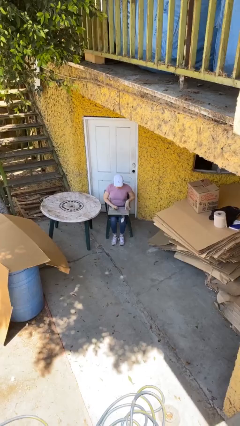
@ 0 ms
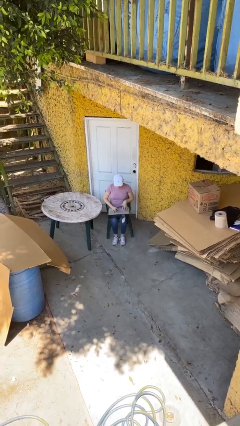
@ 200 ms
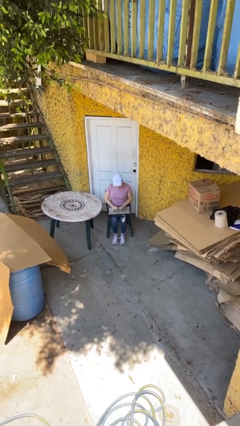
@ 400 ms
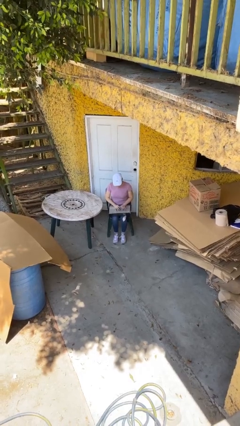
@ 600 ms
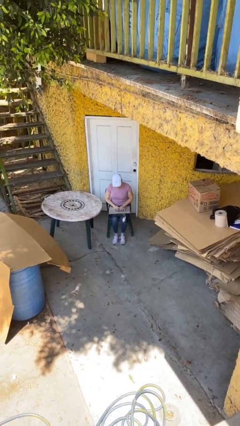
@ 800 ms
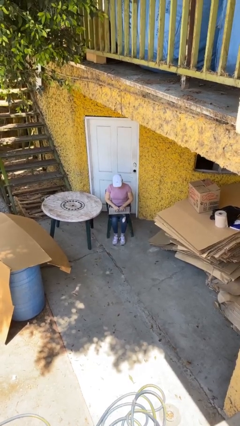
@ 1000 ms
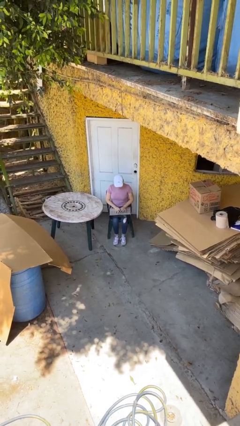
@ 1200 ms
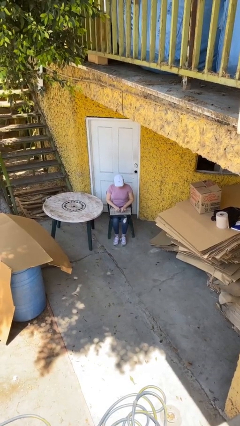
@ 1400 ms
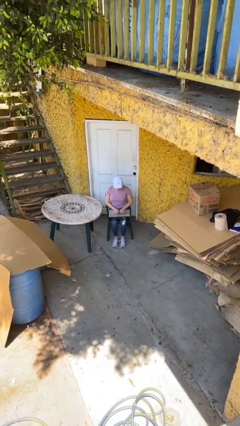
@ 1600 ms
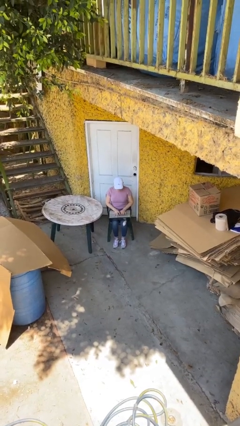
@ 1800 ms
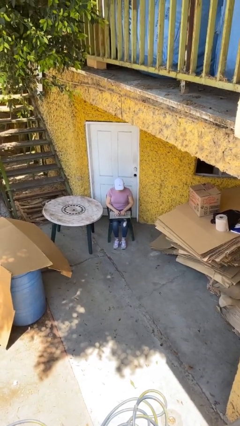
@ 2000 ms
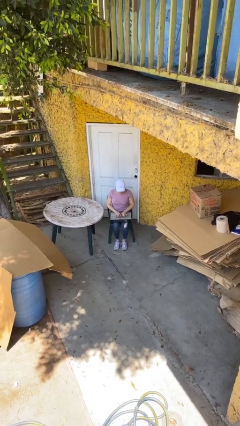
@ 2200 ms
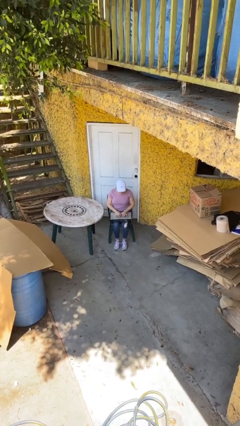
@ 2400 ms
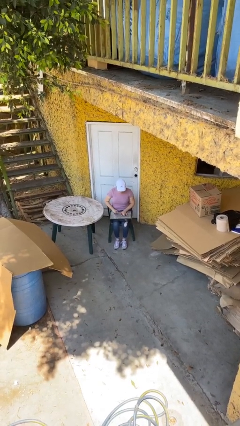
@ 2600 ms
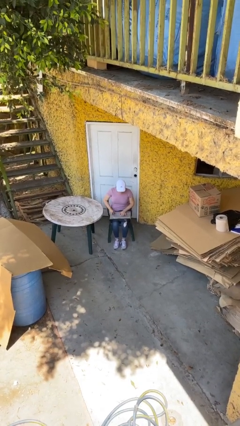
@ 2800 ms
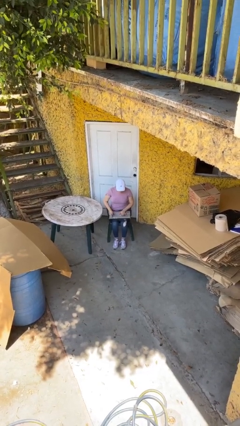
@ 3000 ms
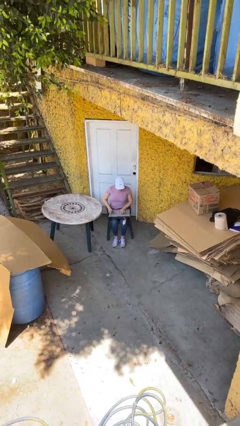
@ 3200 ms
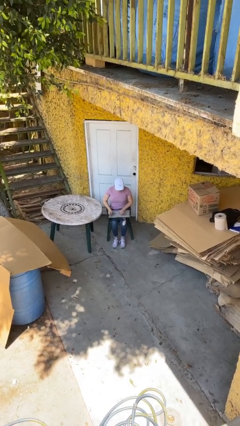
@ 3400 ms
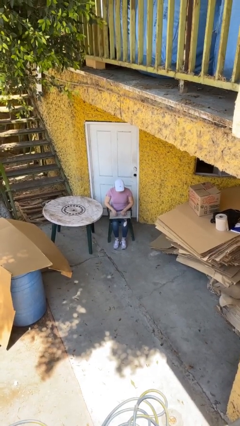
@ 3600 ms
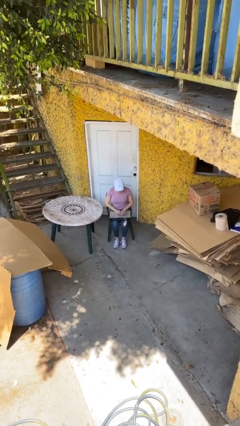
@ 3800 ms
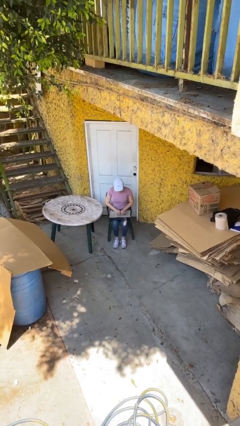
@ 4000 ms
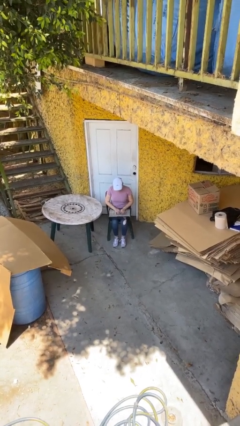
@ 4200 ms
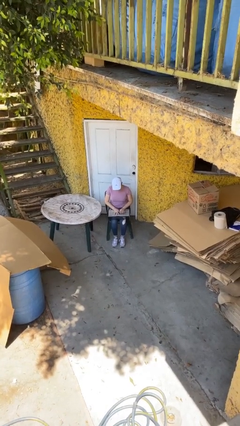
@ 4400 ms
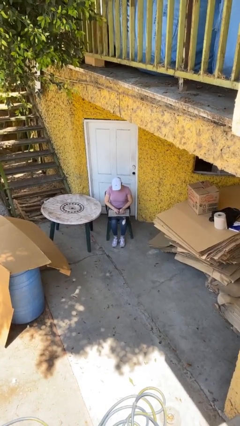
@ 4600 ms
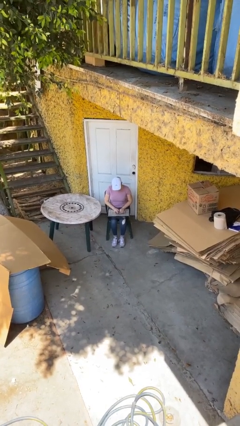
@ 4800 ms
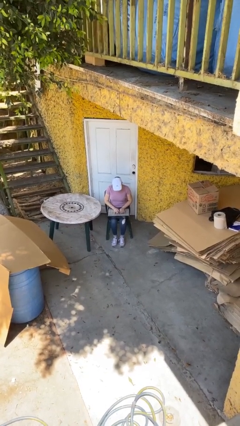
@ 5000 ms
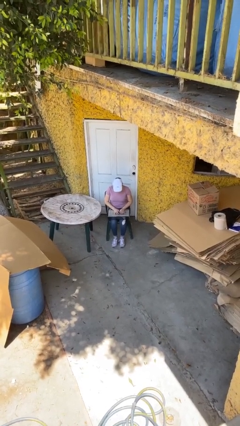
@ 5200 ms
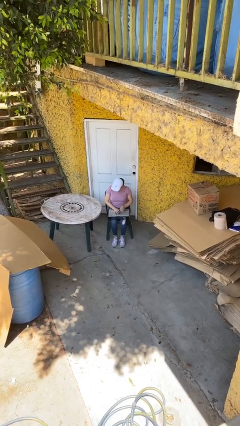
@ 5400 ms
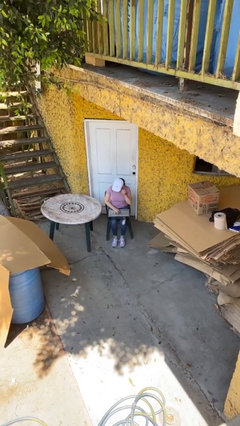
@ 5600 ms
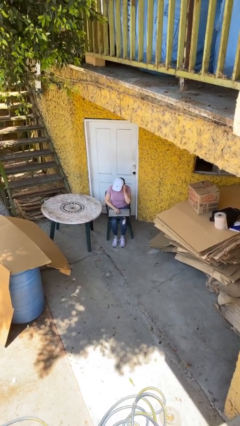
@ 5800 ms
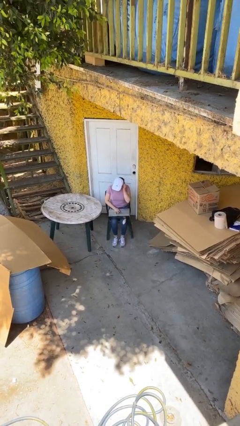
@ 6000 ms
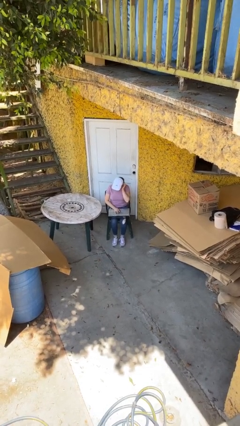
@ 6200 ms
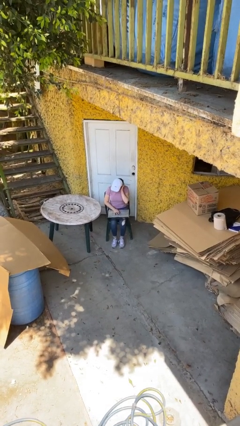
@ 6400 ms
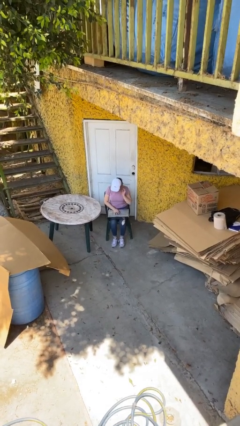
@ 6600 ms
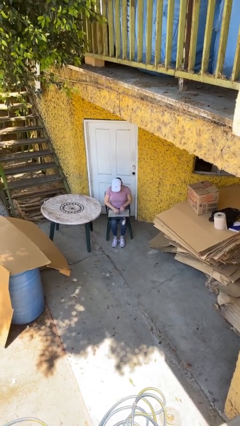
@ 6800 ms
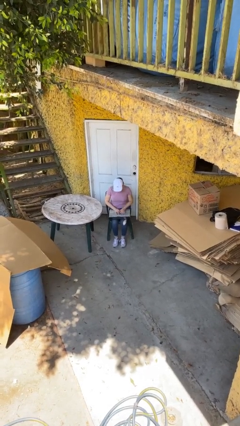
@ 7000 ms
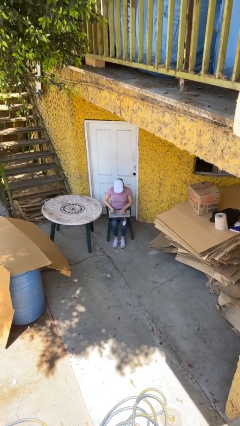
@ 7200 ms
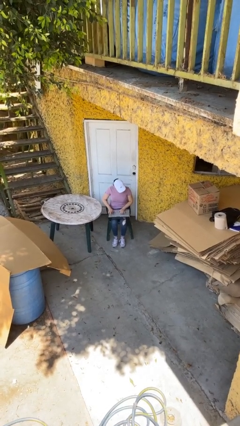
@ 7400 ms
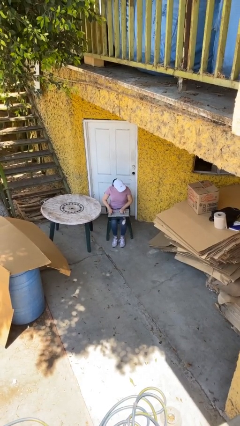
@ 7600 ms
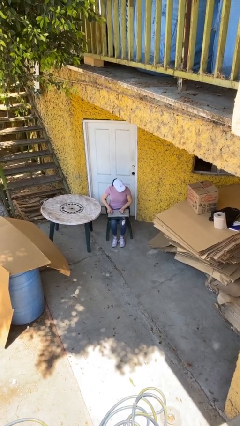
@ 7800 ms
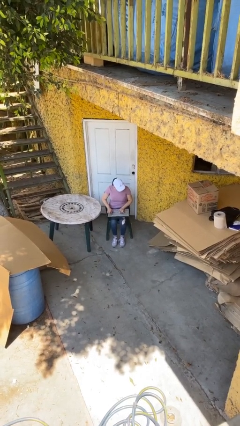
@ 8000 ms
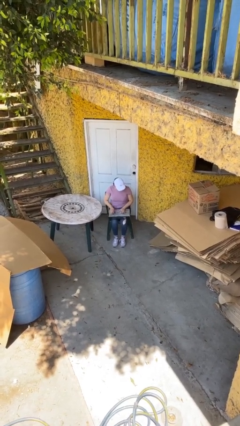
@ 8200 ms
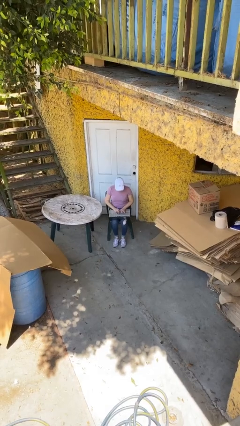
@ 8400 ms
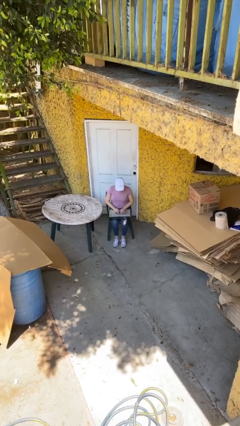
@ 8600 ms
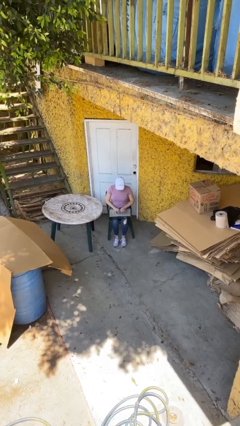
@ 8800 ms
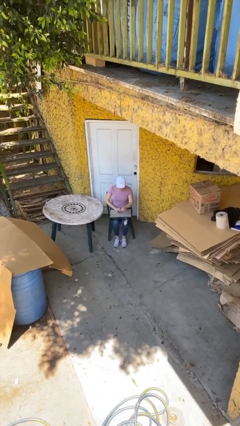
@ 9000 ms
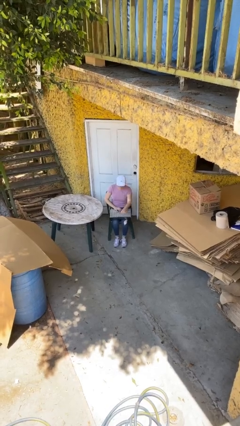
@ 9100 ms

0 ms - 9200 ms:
person interacts with laptop

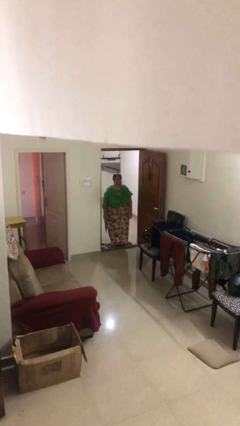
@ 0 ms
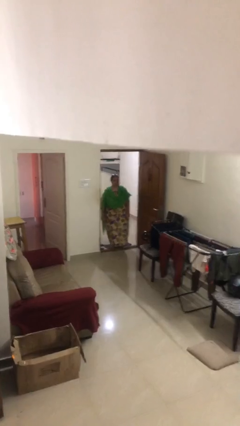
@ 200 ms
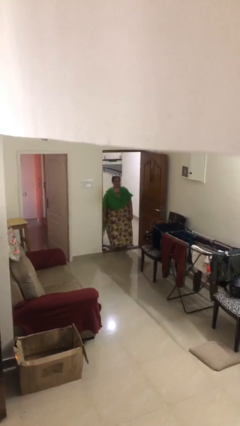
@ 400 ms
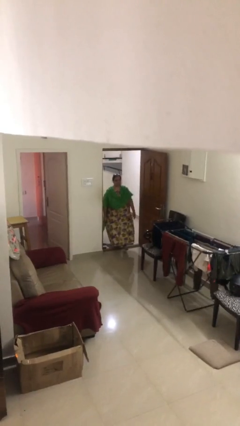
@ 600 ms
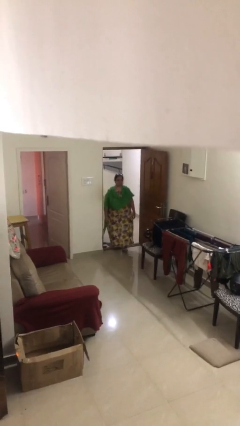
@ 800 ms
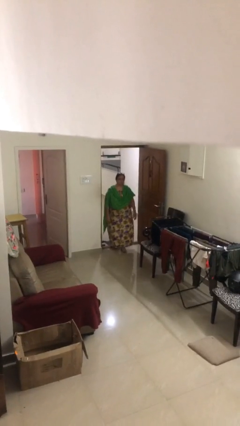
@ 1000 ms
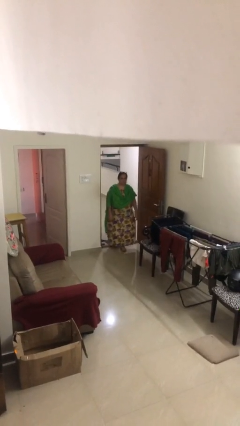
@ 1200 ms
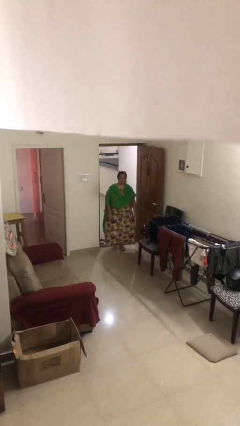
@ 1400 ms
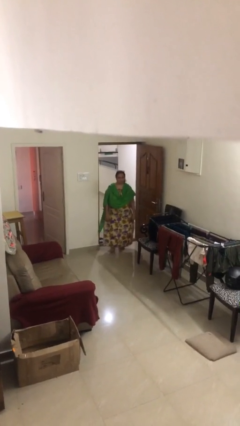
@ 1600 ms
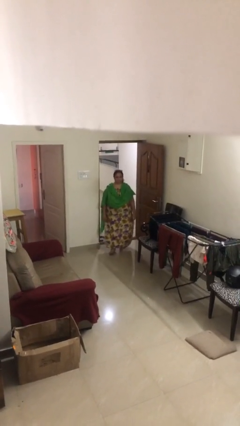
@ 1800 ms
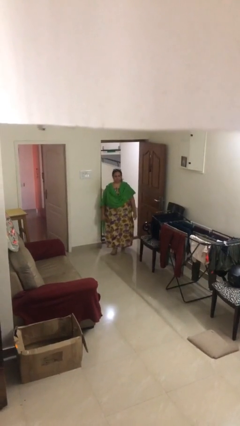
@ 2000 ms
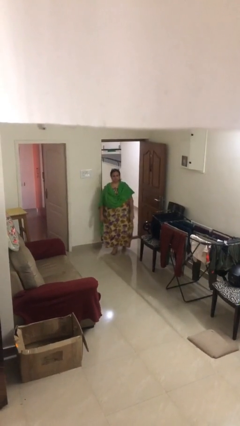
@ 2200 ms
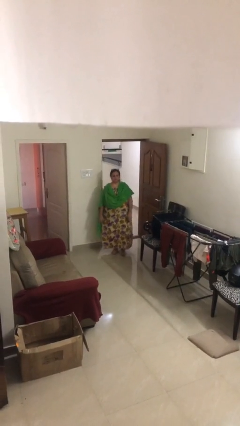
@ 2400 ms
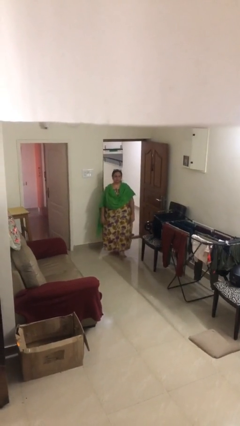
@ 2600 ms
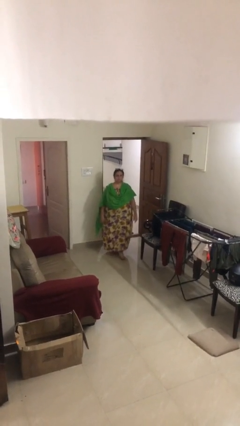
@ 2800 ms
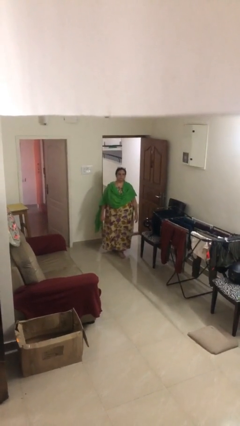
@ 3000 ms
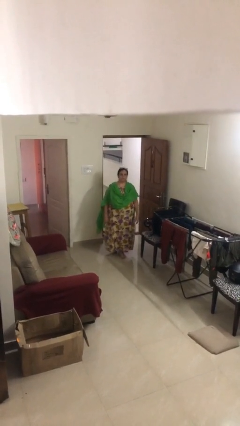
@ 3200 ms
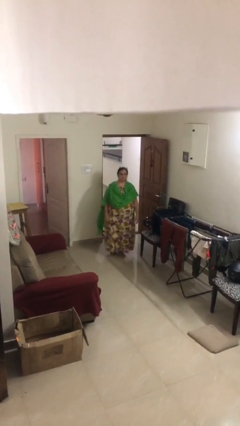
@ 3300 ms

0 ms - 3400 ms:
person enters scene through structure

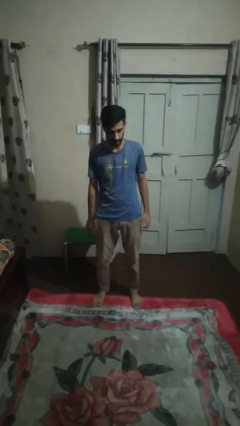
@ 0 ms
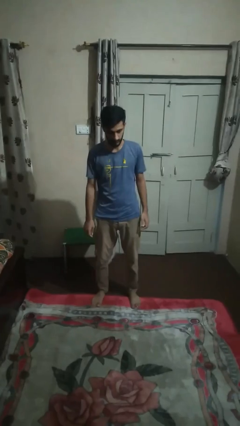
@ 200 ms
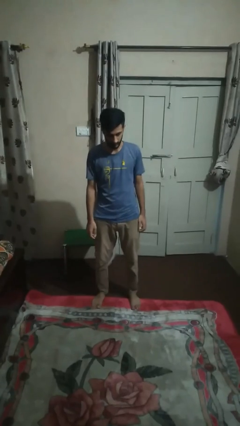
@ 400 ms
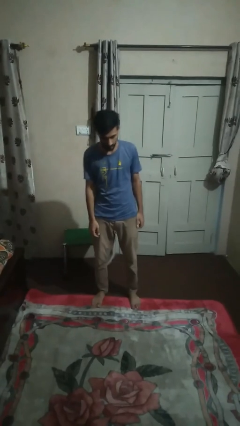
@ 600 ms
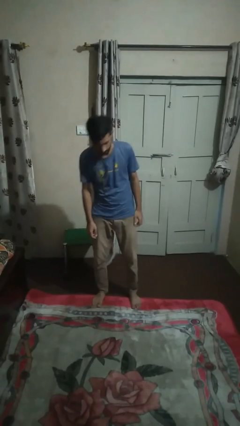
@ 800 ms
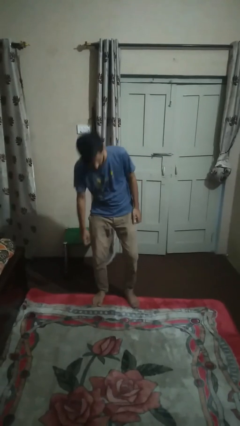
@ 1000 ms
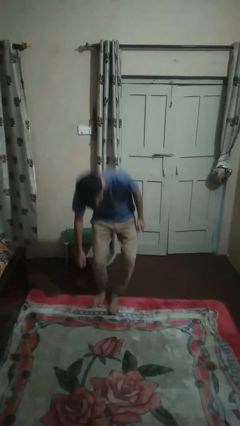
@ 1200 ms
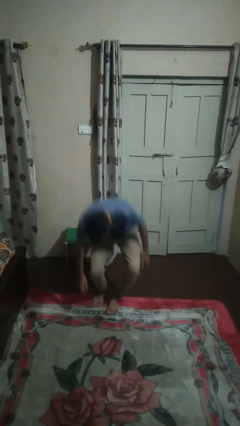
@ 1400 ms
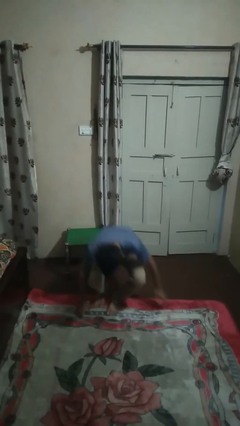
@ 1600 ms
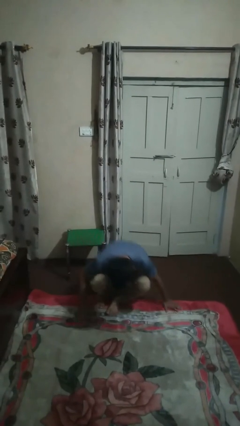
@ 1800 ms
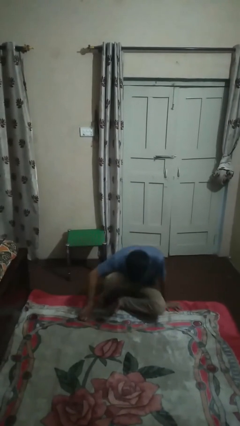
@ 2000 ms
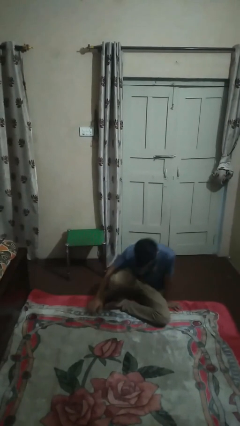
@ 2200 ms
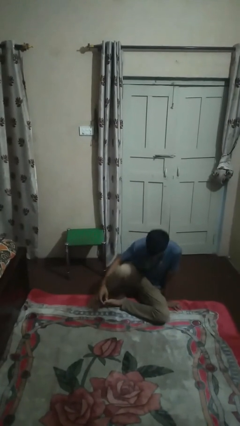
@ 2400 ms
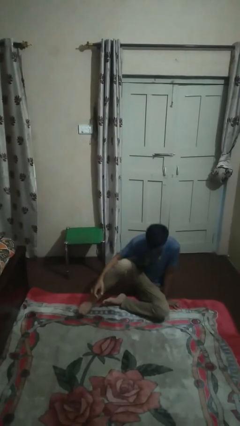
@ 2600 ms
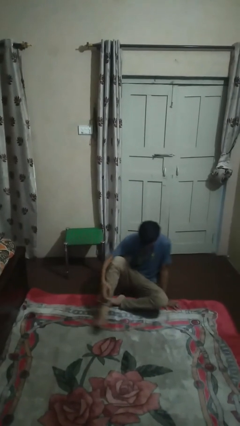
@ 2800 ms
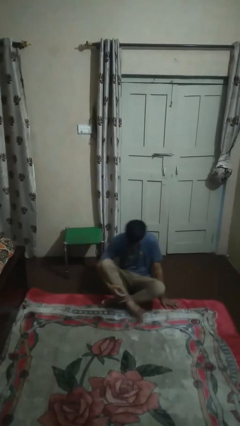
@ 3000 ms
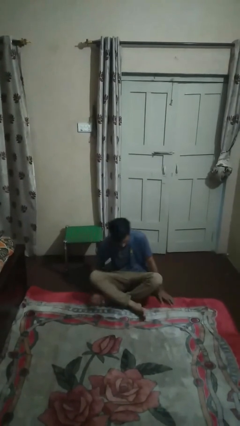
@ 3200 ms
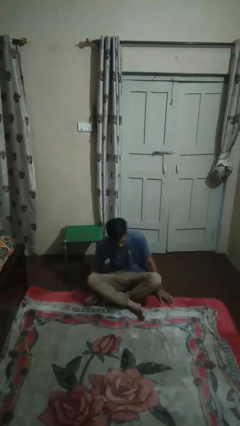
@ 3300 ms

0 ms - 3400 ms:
person sits crisscross

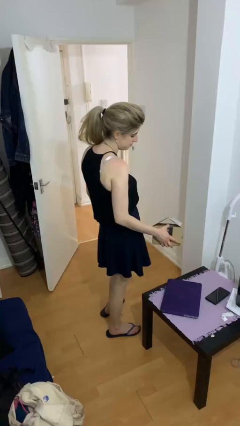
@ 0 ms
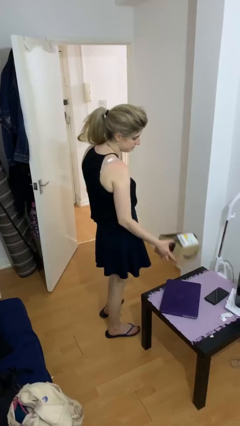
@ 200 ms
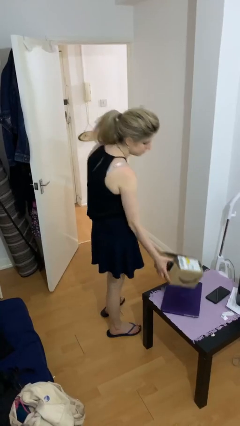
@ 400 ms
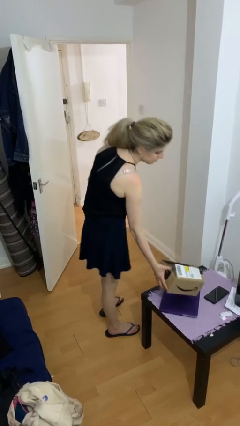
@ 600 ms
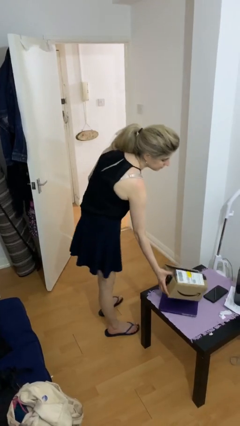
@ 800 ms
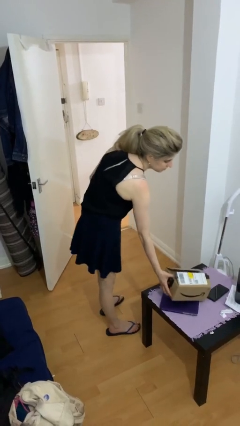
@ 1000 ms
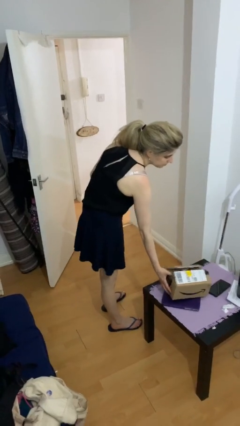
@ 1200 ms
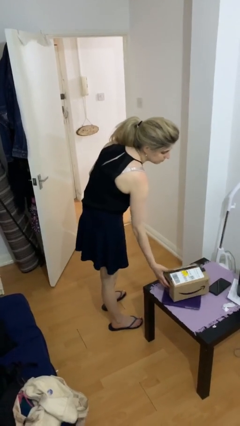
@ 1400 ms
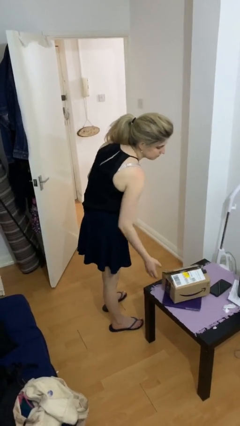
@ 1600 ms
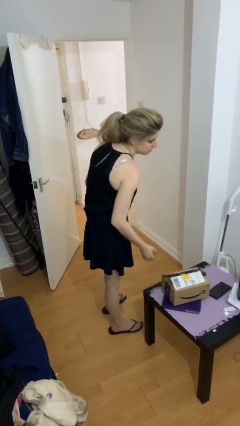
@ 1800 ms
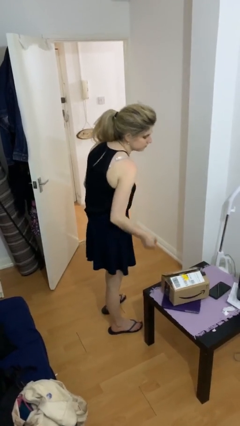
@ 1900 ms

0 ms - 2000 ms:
person puts down object on table
